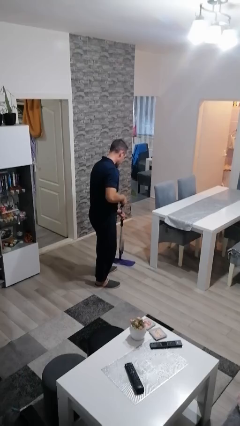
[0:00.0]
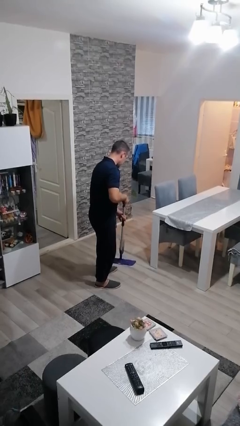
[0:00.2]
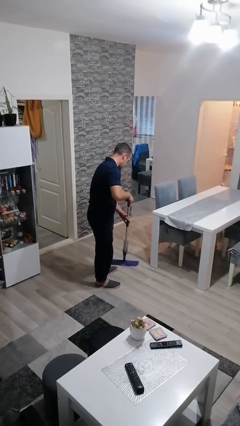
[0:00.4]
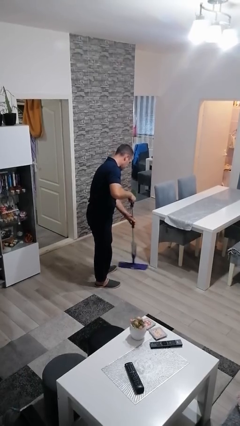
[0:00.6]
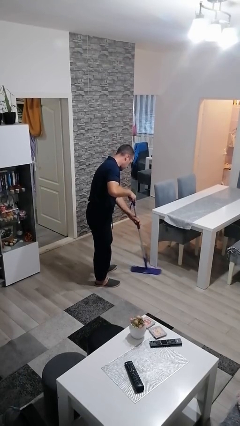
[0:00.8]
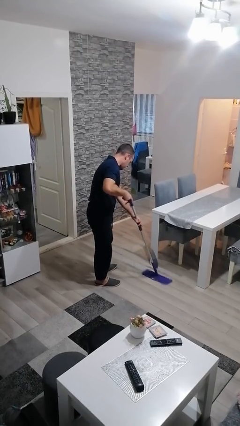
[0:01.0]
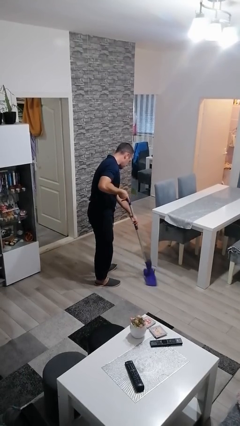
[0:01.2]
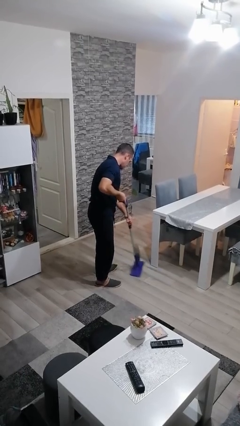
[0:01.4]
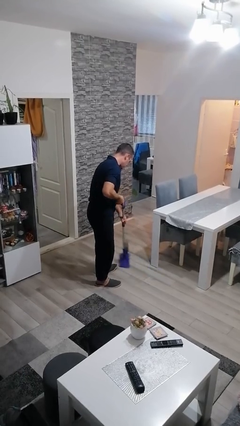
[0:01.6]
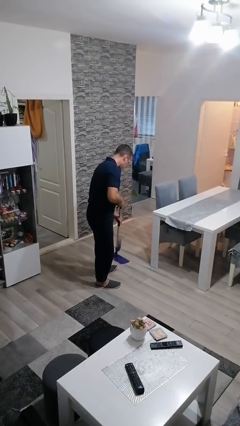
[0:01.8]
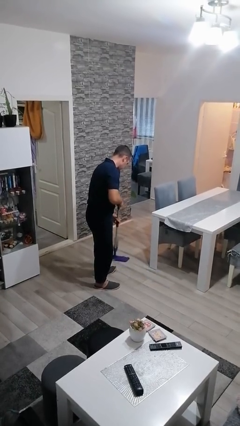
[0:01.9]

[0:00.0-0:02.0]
person mops

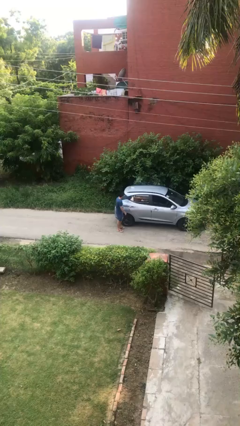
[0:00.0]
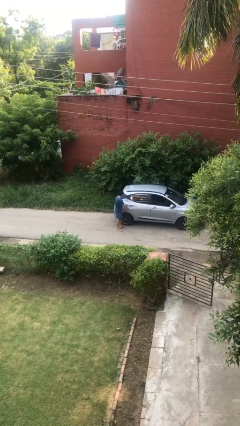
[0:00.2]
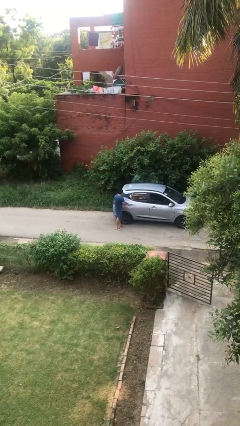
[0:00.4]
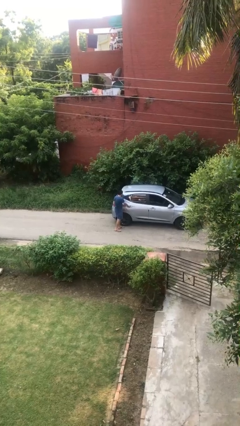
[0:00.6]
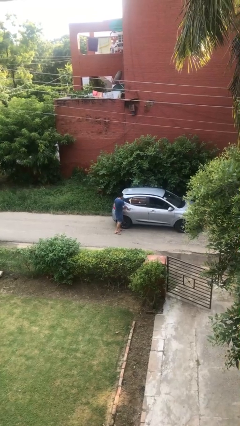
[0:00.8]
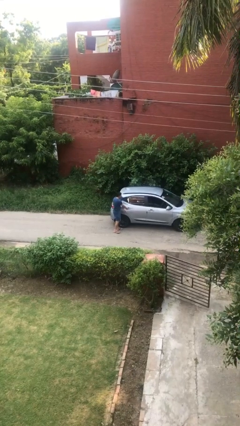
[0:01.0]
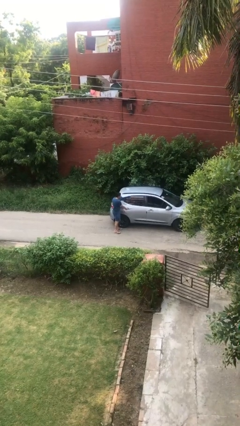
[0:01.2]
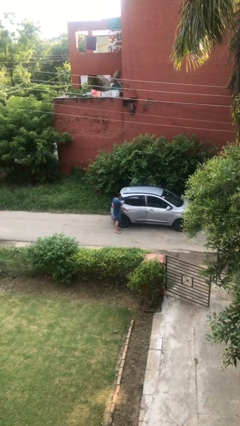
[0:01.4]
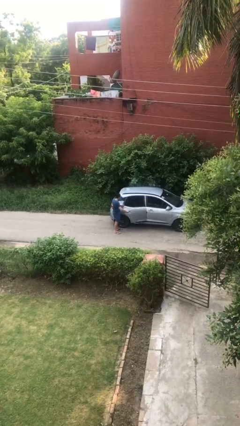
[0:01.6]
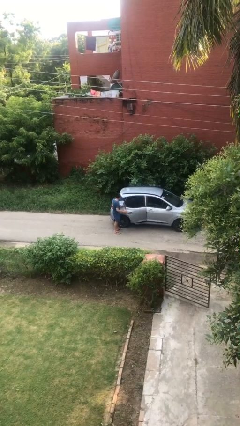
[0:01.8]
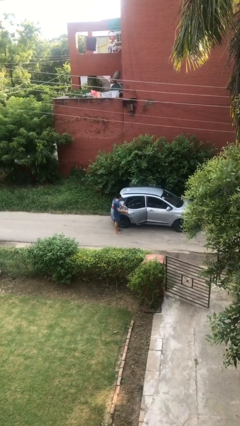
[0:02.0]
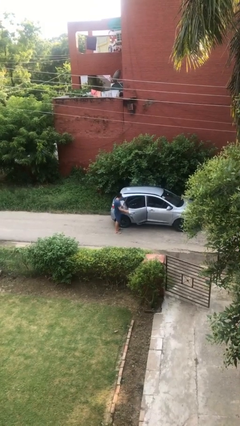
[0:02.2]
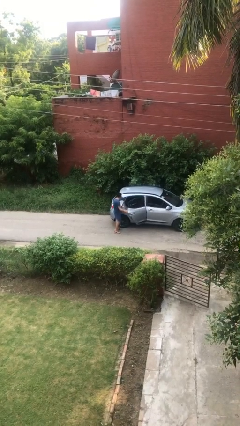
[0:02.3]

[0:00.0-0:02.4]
person opens car door

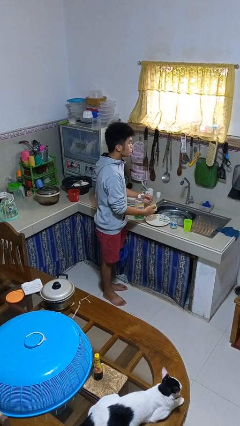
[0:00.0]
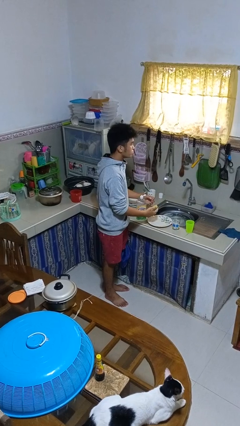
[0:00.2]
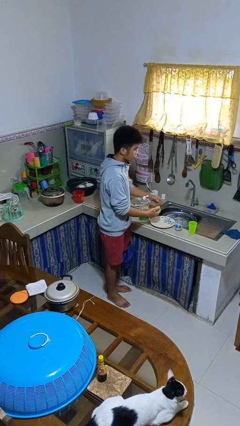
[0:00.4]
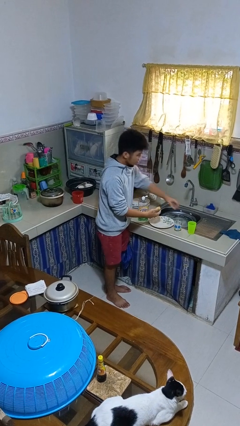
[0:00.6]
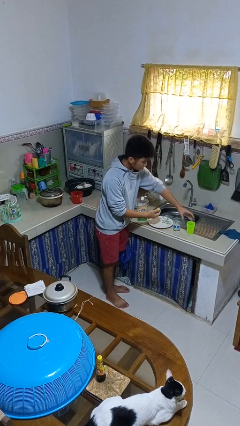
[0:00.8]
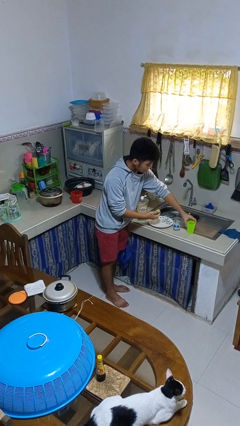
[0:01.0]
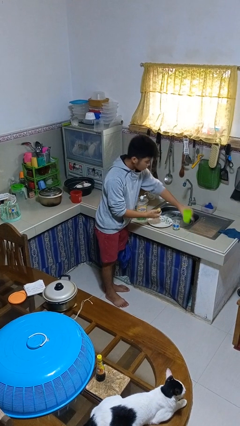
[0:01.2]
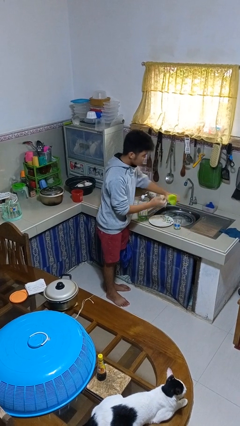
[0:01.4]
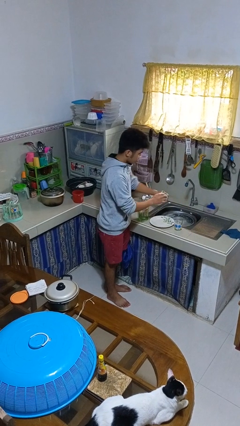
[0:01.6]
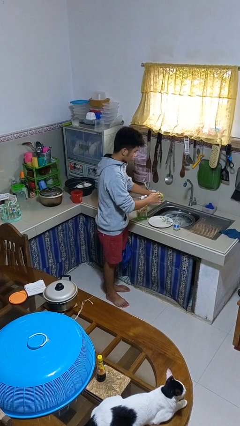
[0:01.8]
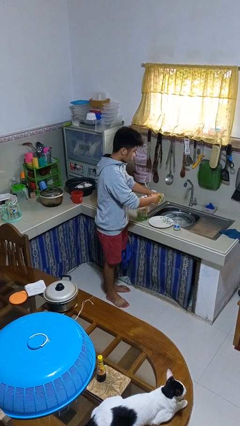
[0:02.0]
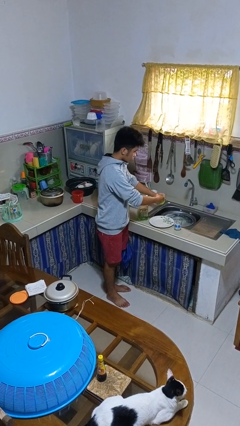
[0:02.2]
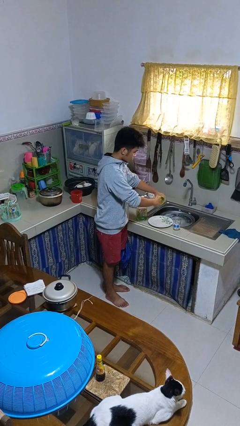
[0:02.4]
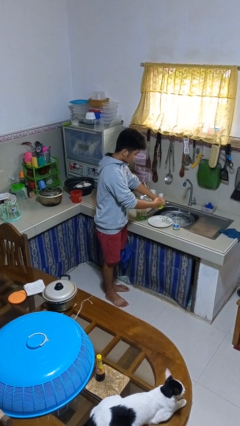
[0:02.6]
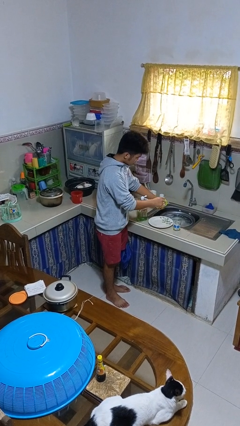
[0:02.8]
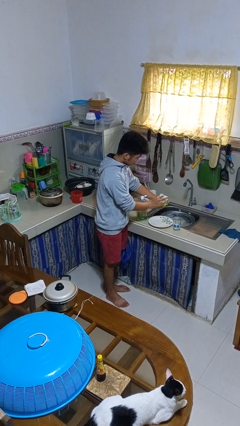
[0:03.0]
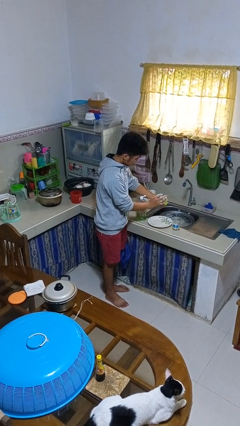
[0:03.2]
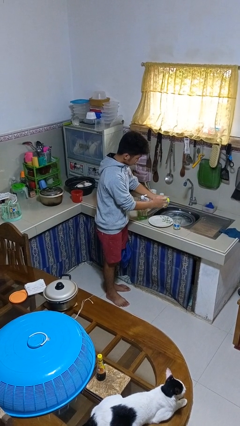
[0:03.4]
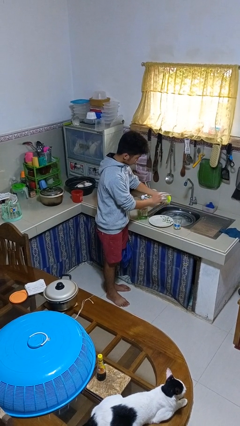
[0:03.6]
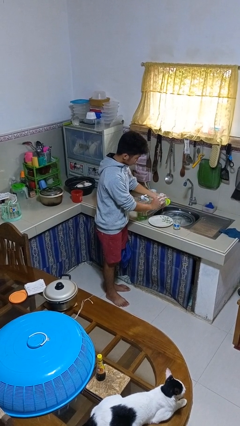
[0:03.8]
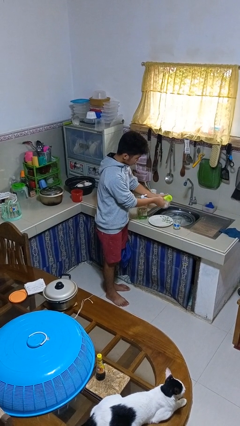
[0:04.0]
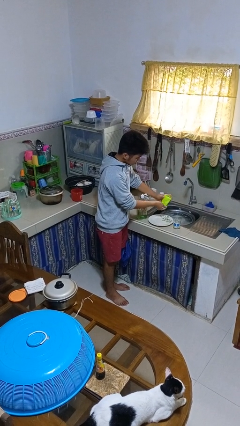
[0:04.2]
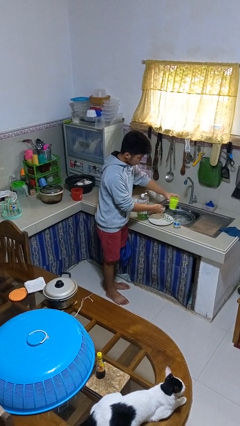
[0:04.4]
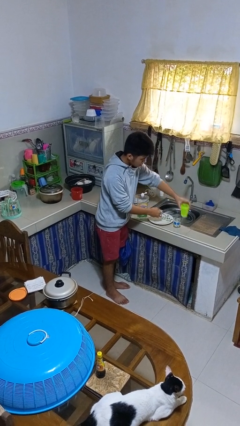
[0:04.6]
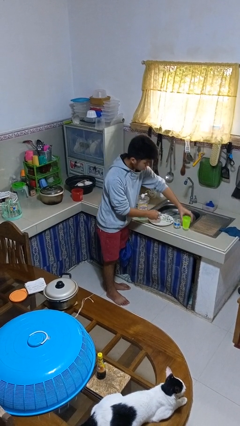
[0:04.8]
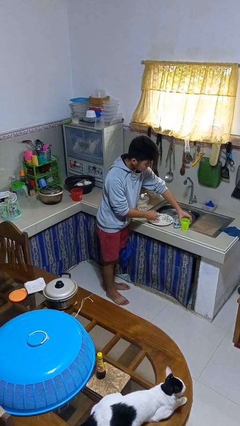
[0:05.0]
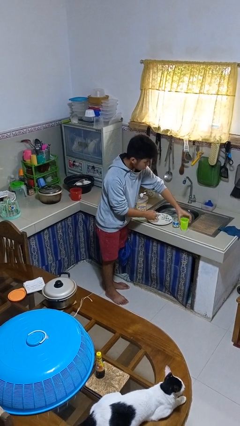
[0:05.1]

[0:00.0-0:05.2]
person washes dish

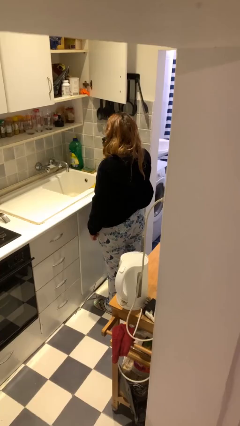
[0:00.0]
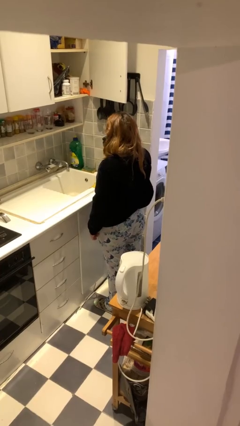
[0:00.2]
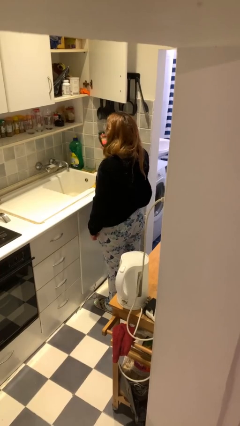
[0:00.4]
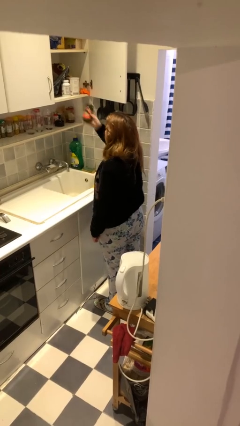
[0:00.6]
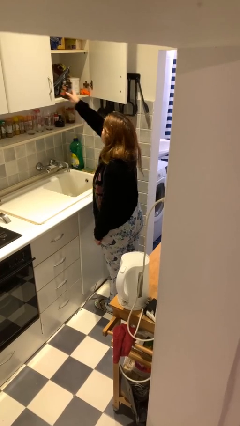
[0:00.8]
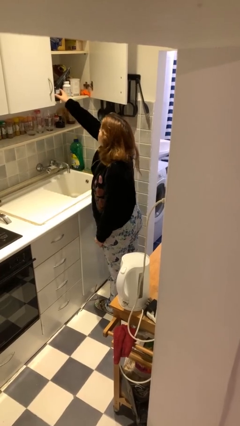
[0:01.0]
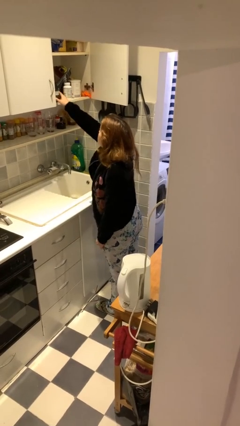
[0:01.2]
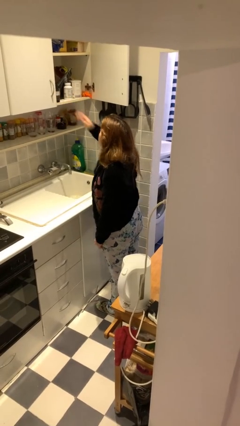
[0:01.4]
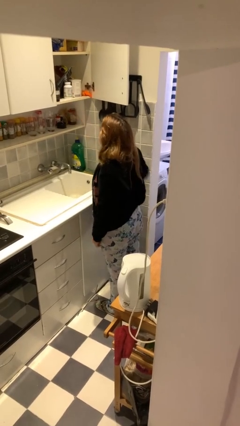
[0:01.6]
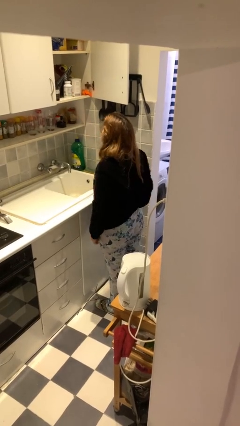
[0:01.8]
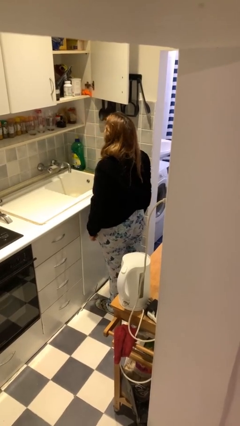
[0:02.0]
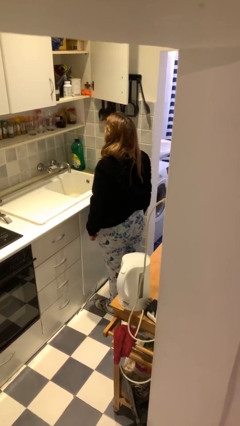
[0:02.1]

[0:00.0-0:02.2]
person puts object in cabinet

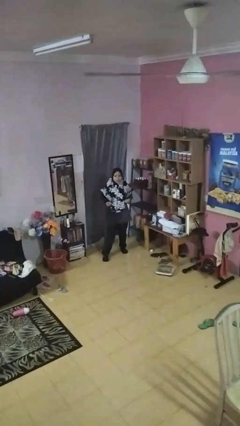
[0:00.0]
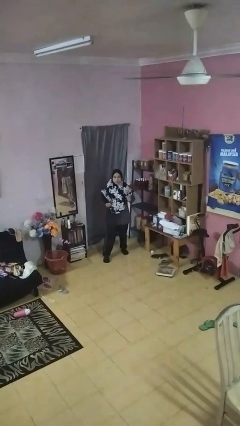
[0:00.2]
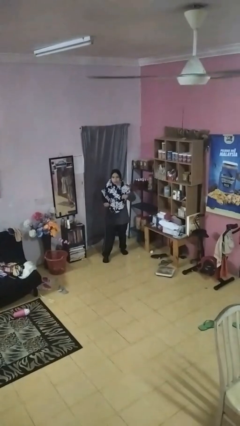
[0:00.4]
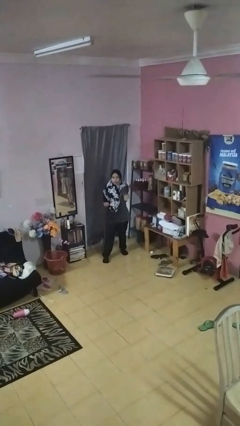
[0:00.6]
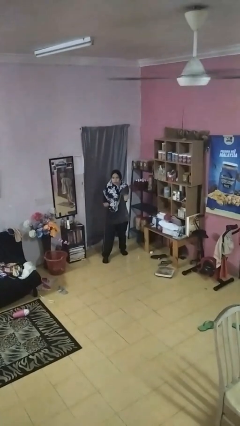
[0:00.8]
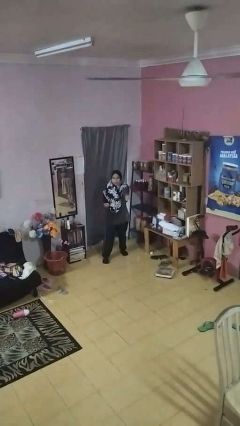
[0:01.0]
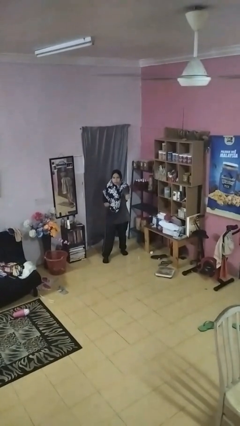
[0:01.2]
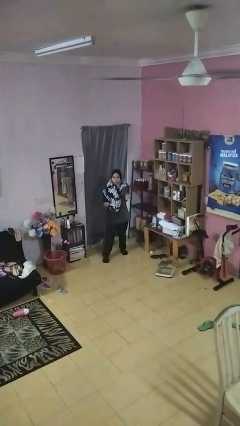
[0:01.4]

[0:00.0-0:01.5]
person punches

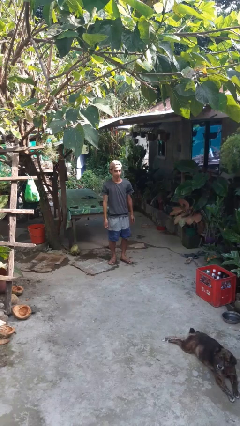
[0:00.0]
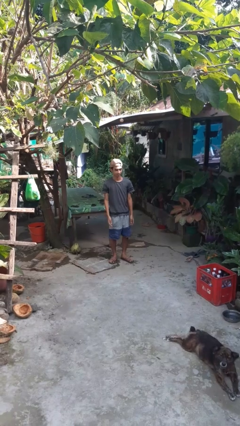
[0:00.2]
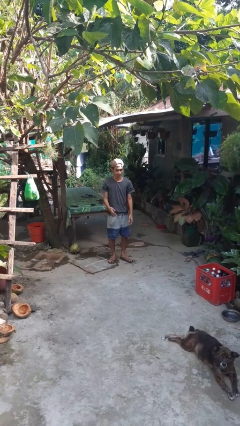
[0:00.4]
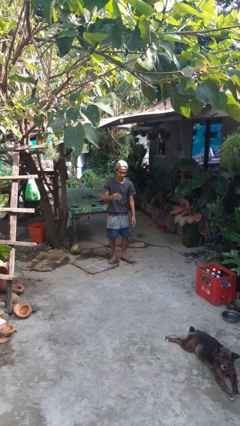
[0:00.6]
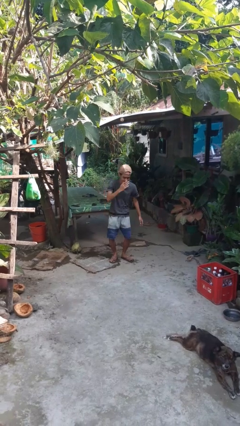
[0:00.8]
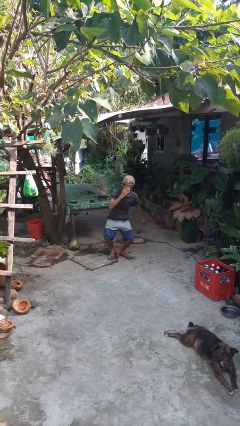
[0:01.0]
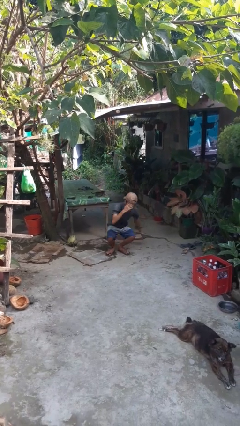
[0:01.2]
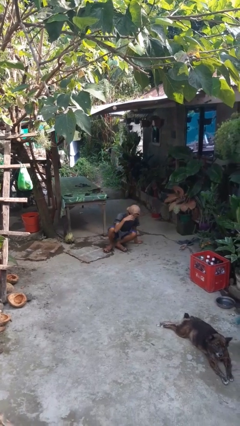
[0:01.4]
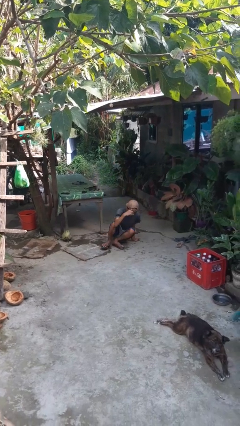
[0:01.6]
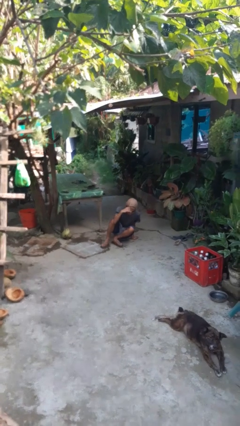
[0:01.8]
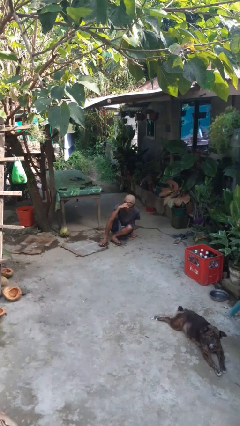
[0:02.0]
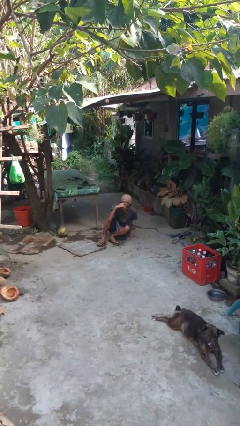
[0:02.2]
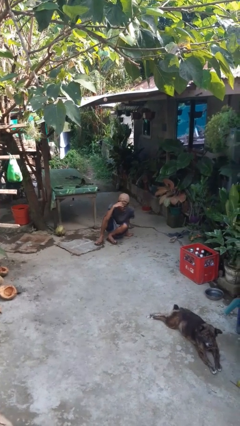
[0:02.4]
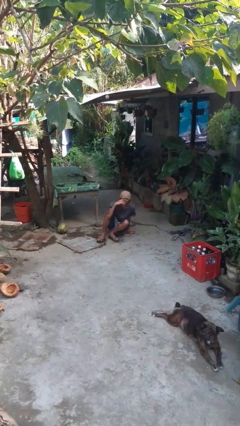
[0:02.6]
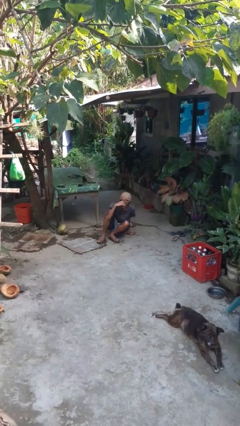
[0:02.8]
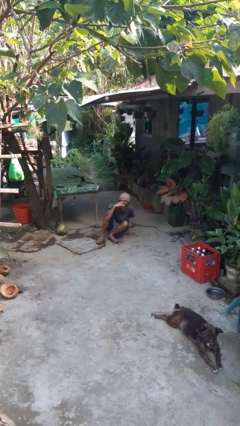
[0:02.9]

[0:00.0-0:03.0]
person falls while standing

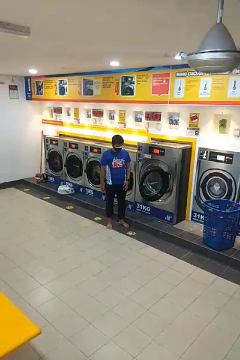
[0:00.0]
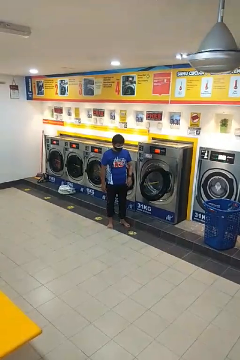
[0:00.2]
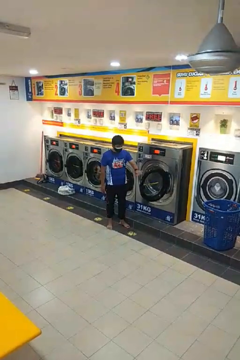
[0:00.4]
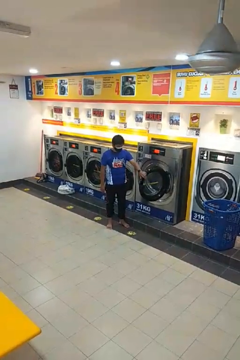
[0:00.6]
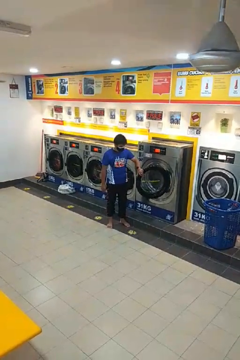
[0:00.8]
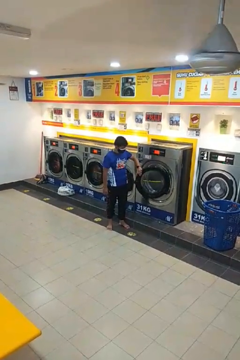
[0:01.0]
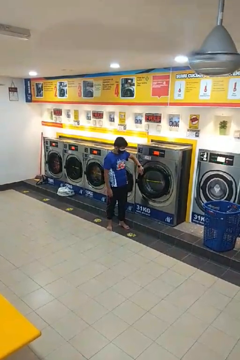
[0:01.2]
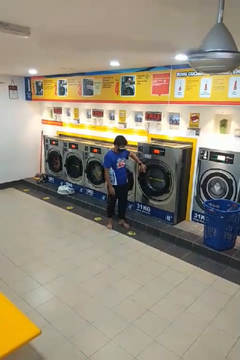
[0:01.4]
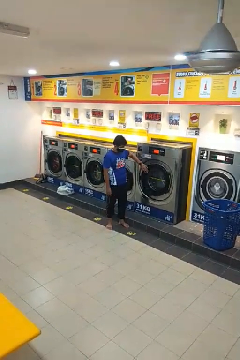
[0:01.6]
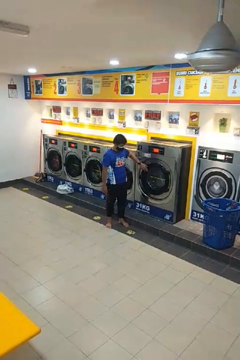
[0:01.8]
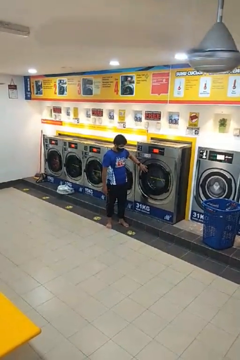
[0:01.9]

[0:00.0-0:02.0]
person closes clothes washer
